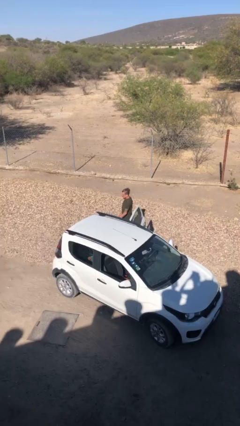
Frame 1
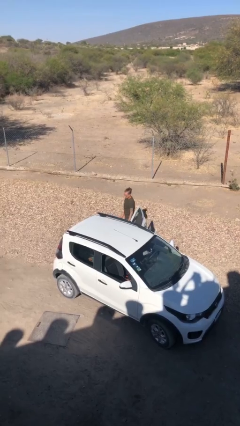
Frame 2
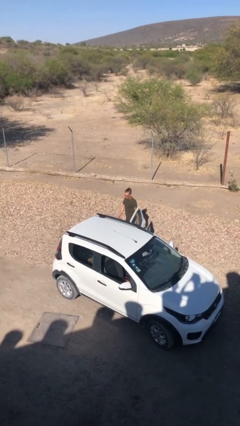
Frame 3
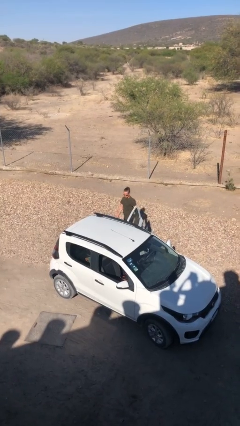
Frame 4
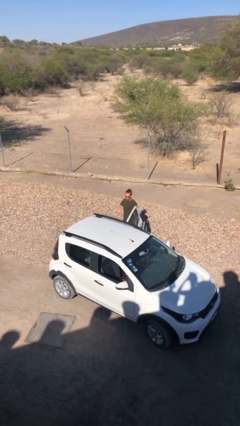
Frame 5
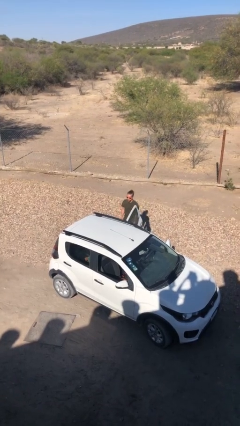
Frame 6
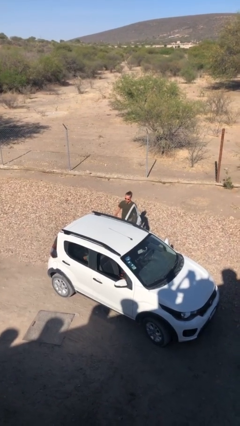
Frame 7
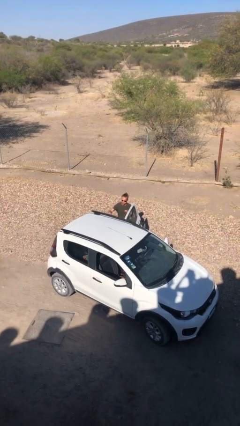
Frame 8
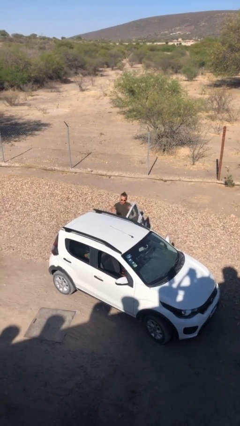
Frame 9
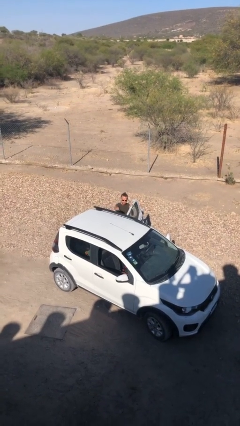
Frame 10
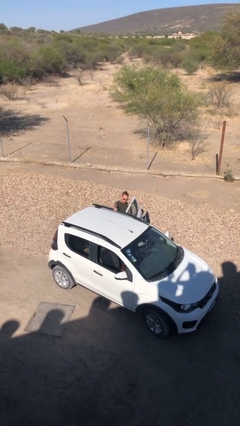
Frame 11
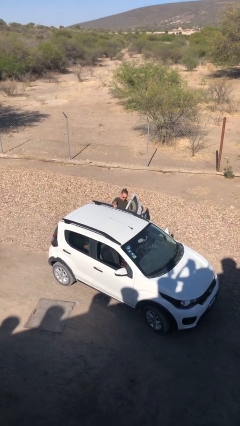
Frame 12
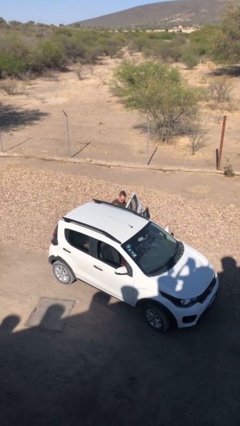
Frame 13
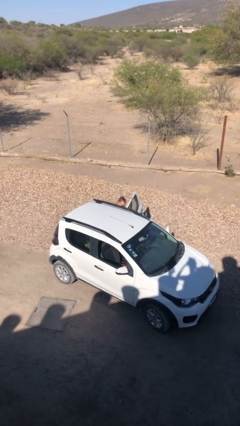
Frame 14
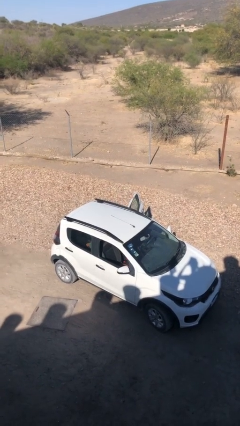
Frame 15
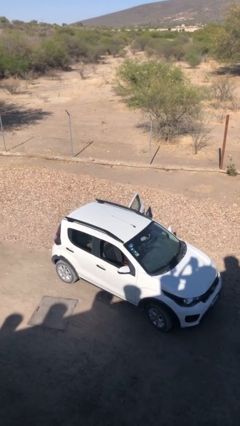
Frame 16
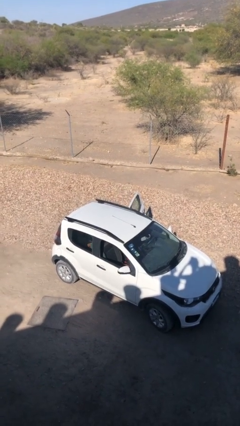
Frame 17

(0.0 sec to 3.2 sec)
person enters car

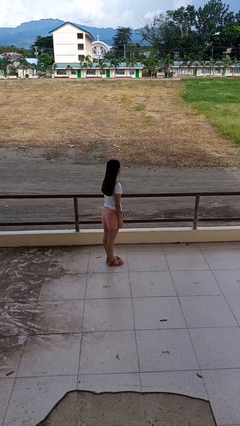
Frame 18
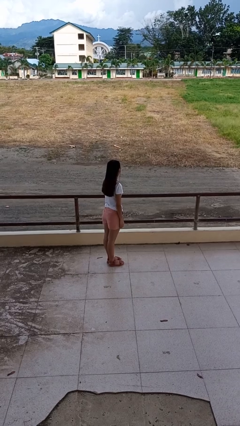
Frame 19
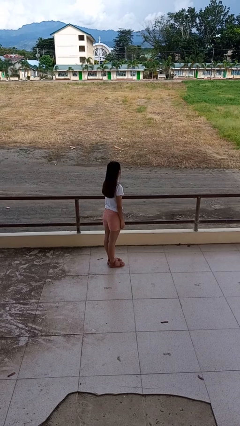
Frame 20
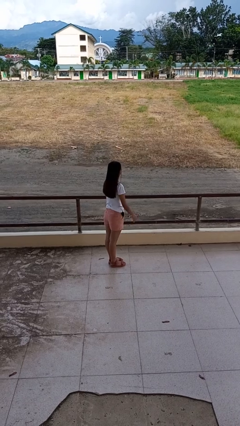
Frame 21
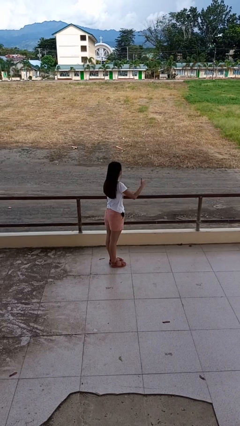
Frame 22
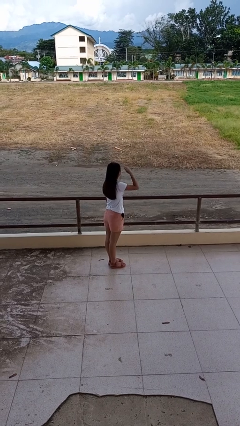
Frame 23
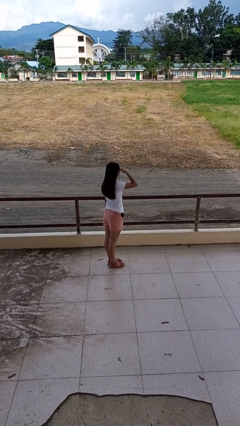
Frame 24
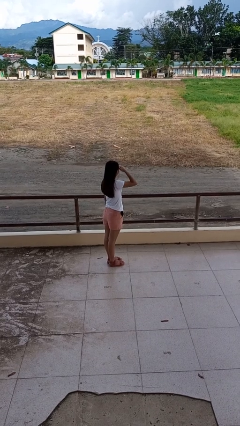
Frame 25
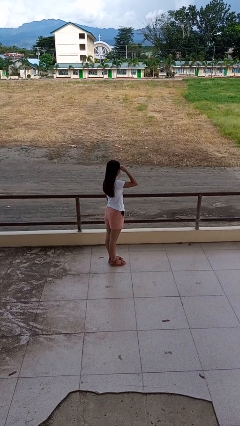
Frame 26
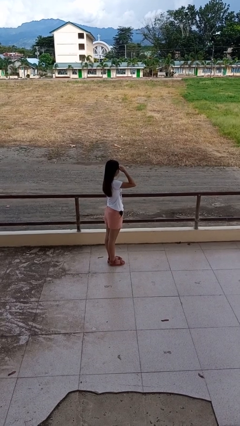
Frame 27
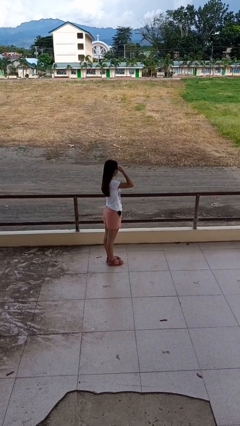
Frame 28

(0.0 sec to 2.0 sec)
person shades eyes

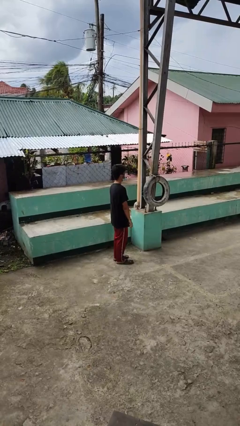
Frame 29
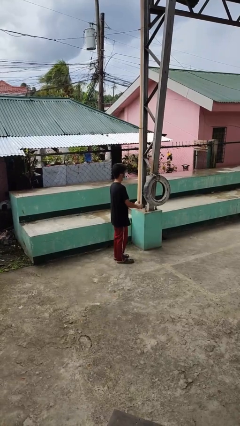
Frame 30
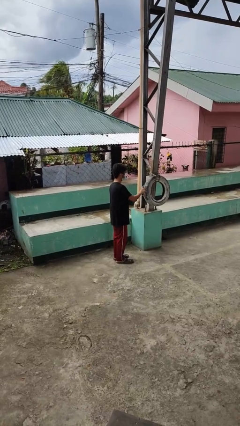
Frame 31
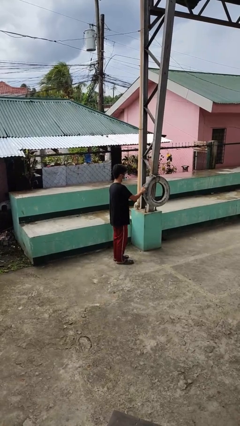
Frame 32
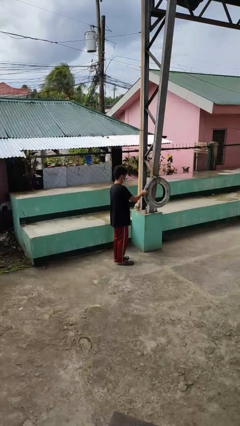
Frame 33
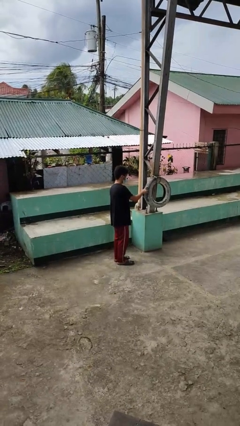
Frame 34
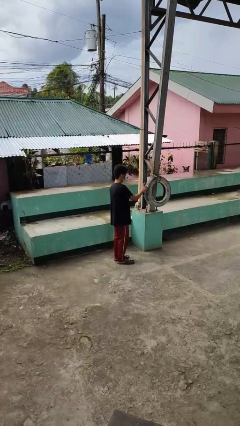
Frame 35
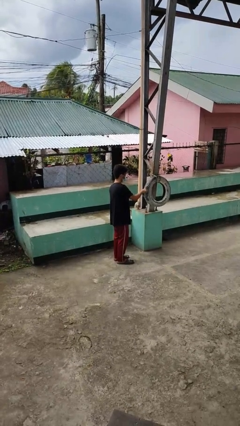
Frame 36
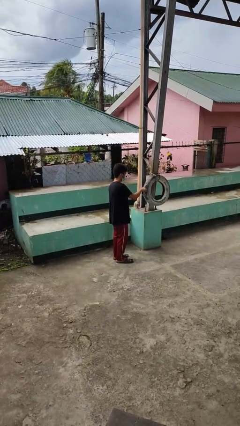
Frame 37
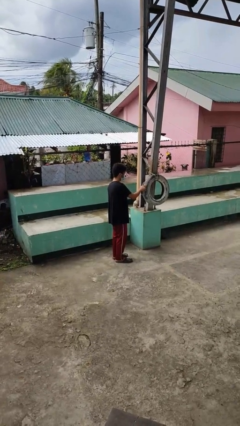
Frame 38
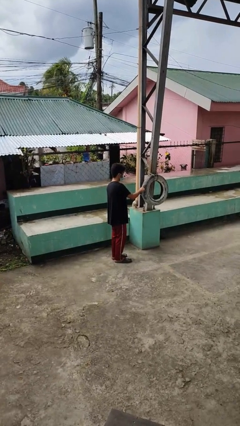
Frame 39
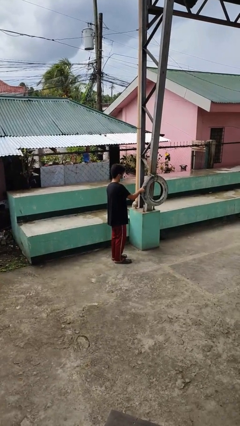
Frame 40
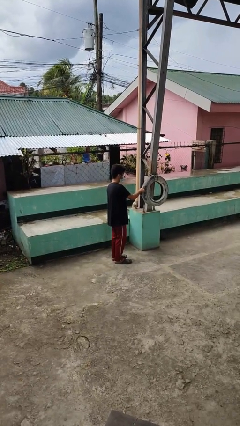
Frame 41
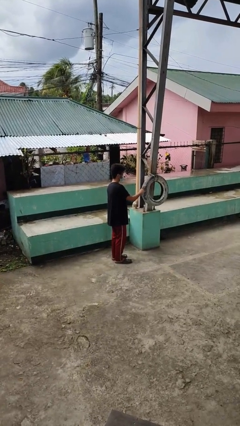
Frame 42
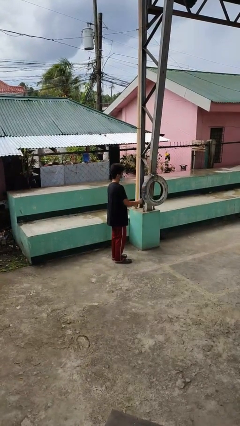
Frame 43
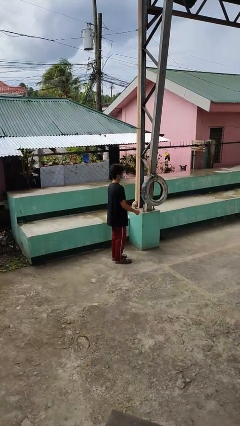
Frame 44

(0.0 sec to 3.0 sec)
person taps object with finger

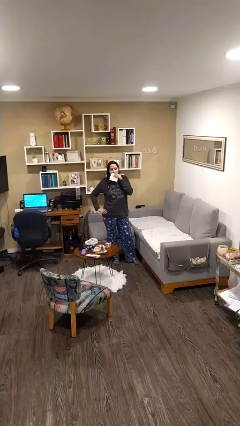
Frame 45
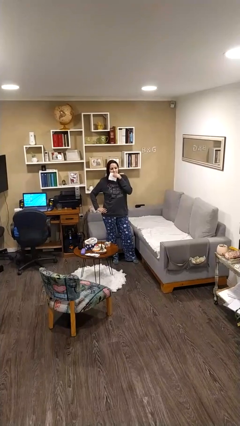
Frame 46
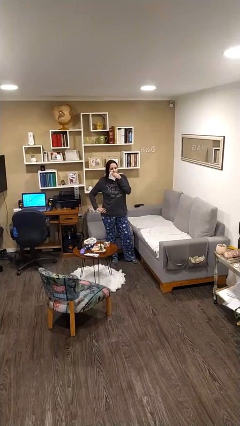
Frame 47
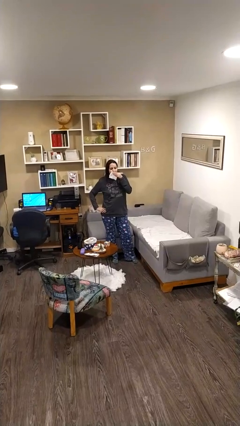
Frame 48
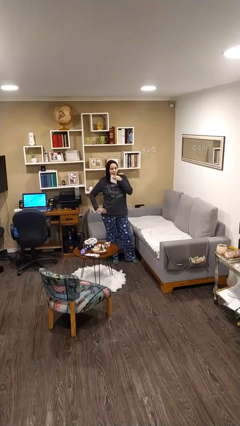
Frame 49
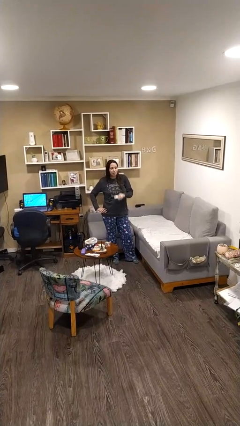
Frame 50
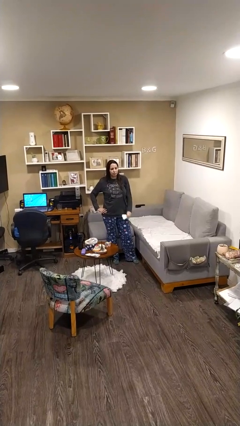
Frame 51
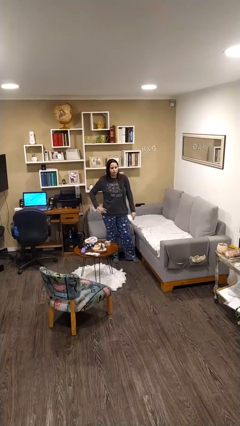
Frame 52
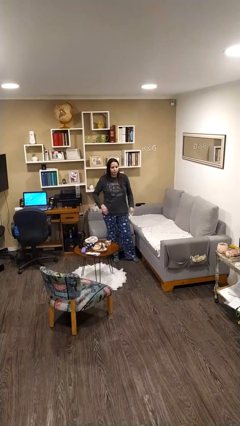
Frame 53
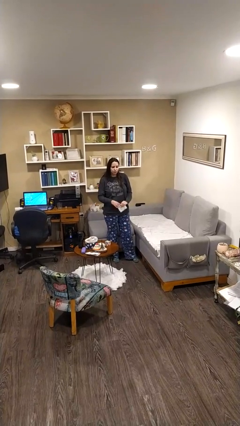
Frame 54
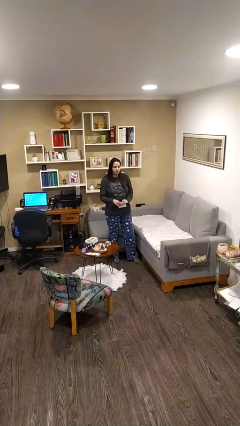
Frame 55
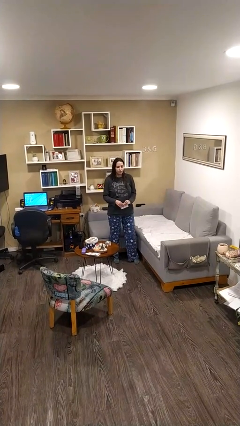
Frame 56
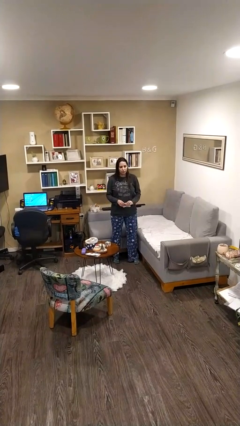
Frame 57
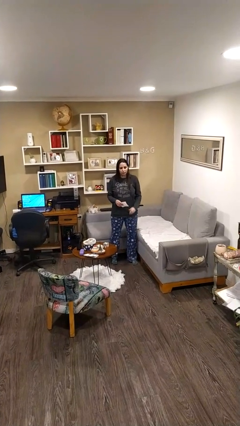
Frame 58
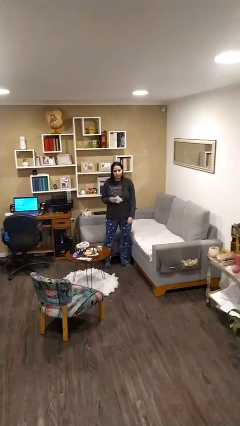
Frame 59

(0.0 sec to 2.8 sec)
person wipes mouth with napkin

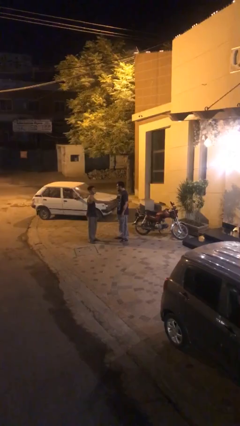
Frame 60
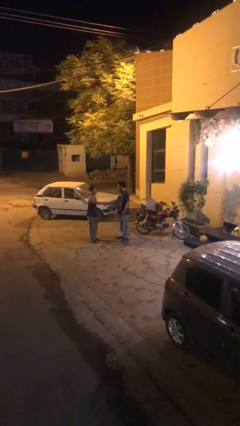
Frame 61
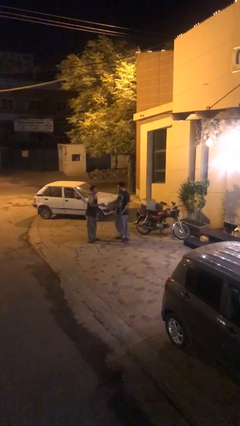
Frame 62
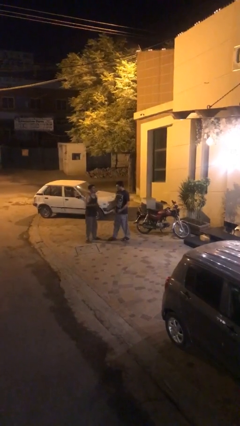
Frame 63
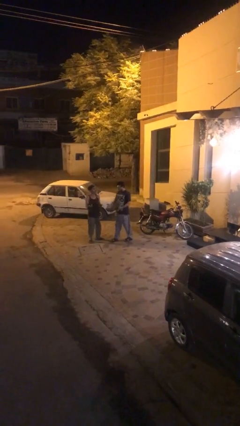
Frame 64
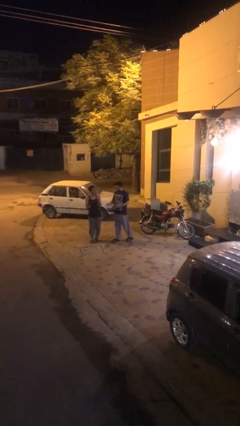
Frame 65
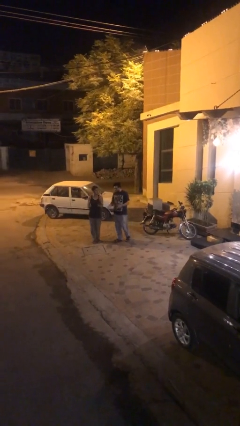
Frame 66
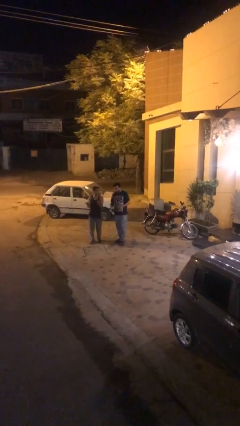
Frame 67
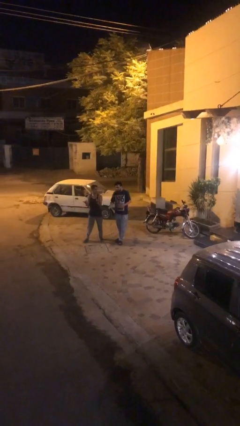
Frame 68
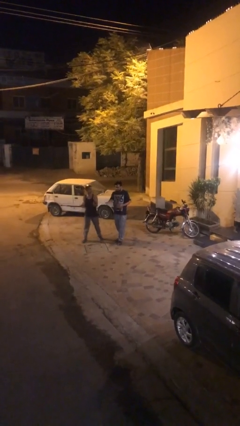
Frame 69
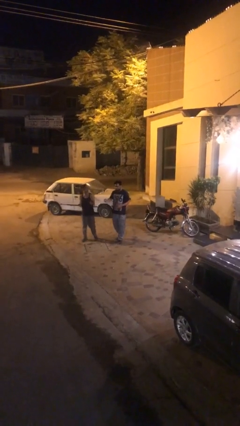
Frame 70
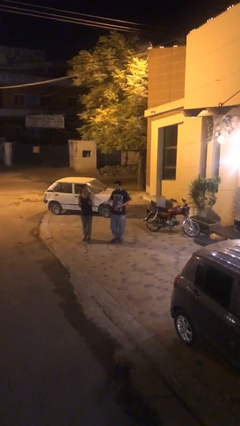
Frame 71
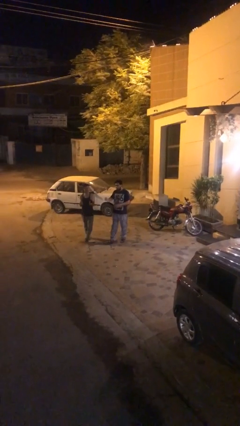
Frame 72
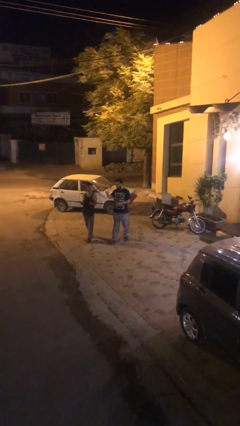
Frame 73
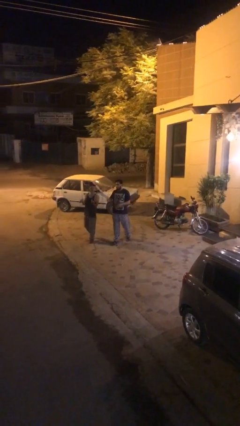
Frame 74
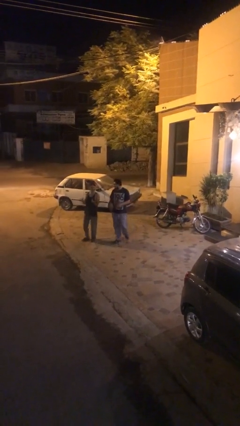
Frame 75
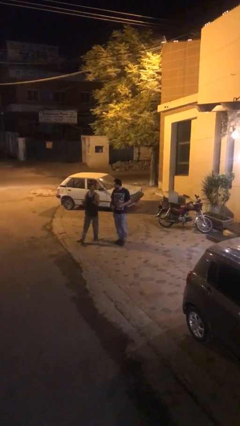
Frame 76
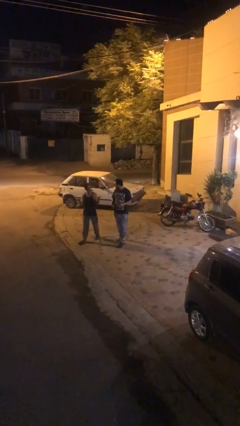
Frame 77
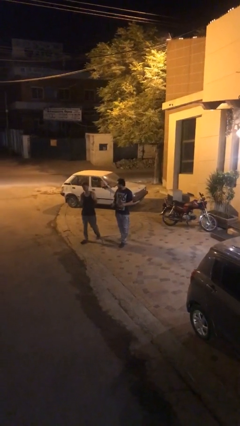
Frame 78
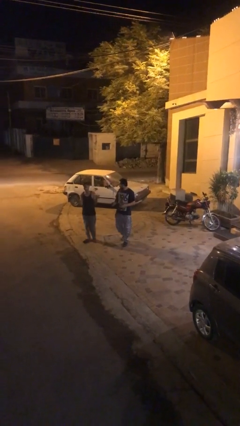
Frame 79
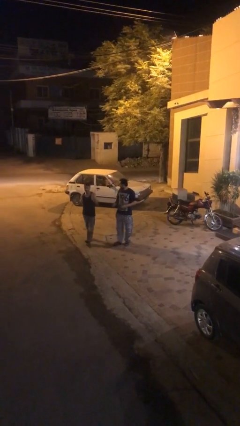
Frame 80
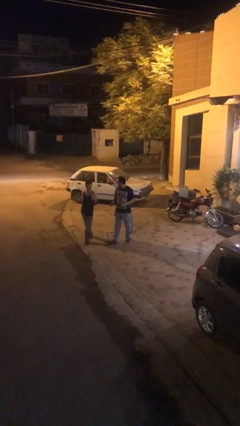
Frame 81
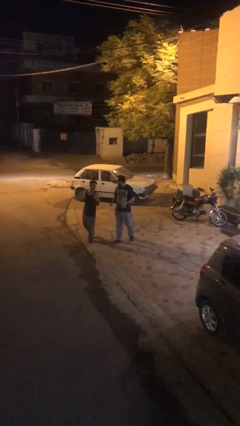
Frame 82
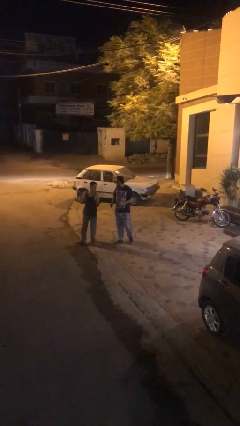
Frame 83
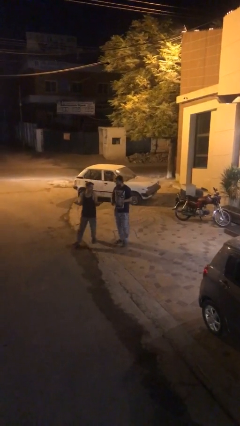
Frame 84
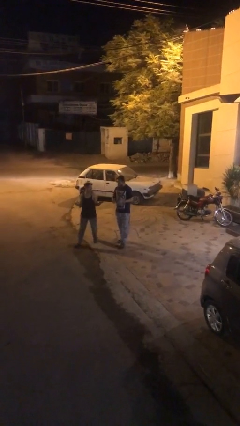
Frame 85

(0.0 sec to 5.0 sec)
person talks to person

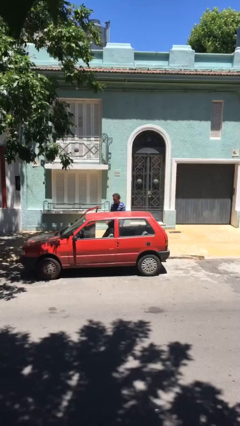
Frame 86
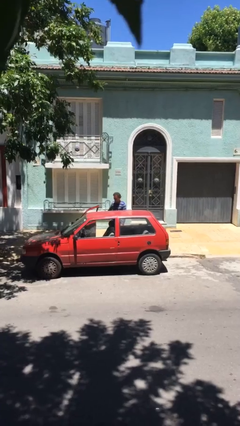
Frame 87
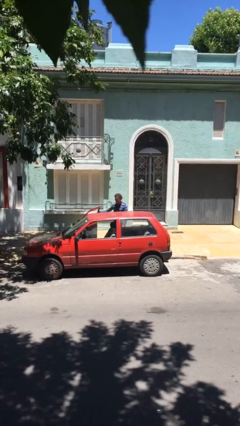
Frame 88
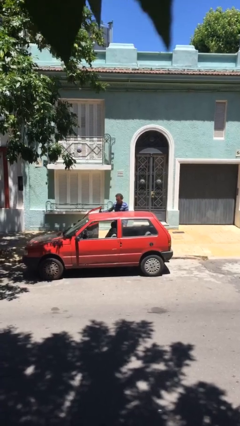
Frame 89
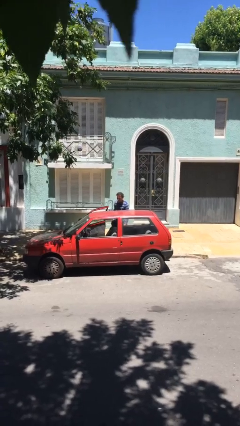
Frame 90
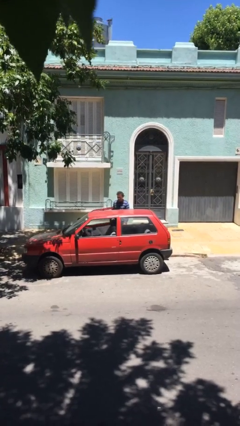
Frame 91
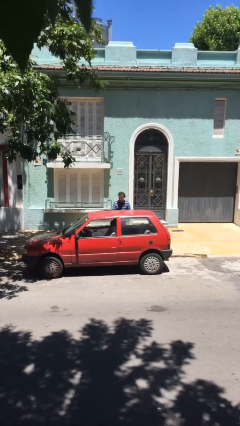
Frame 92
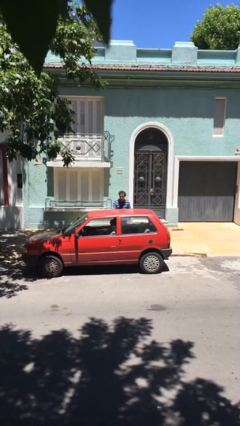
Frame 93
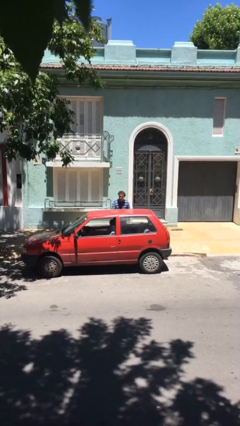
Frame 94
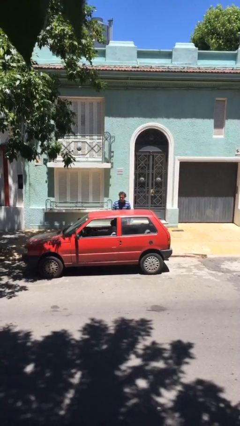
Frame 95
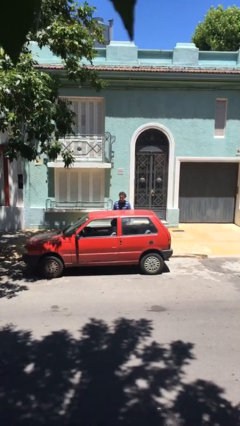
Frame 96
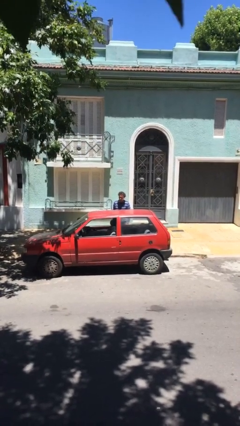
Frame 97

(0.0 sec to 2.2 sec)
person closes car door
